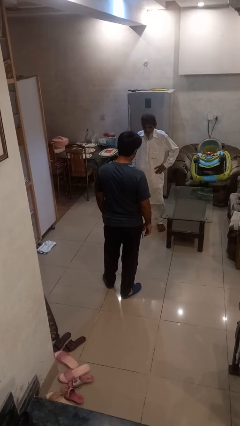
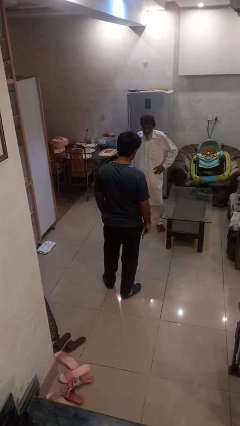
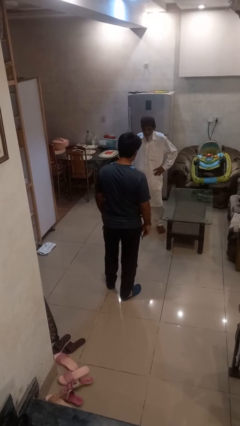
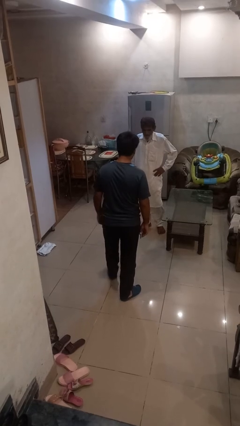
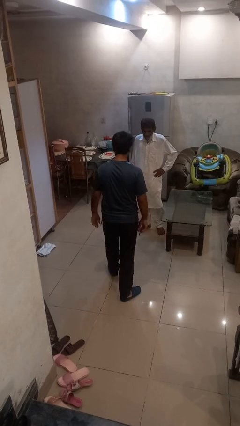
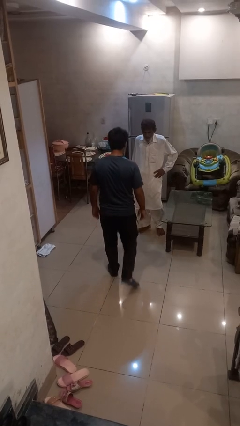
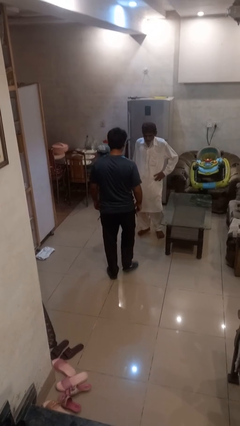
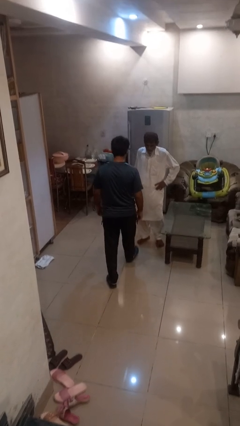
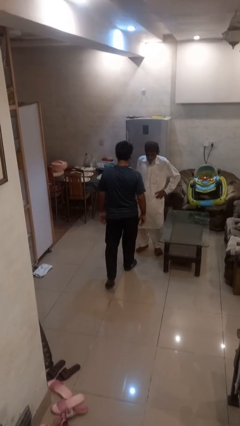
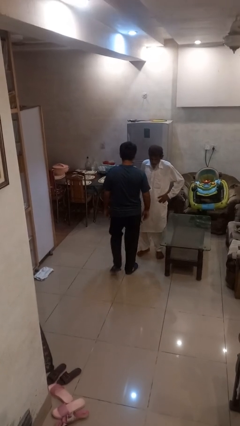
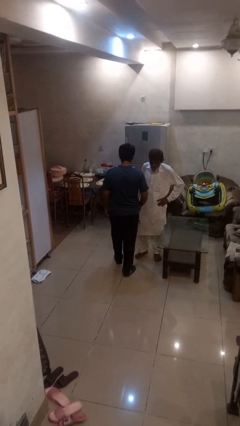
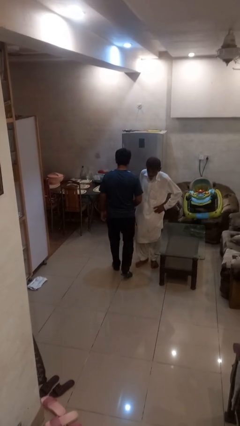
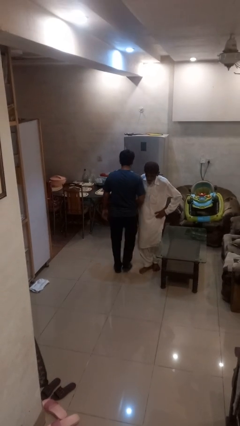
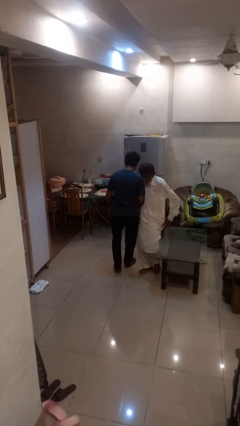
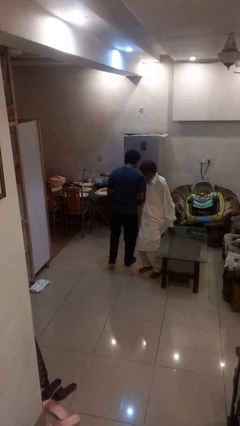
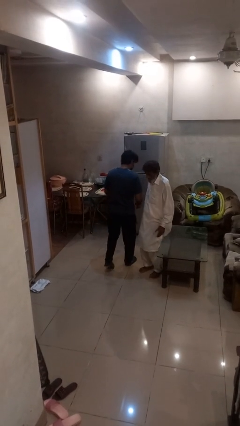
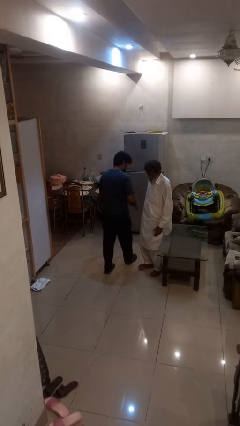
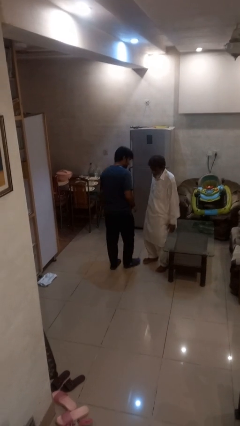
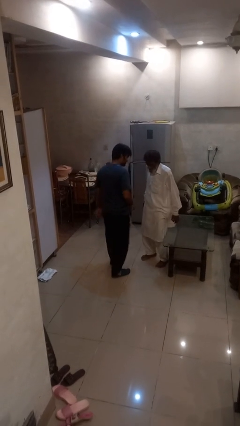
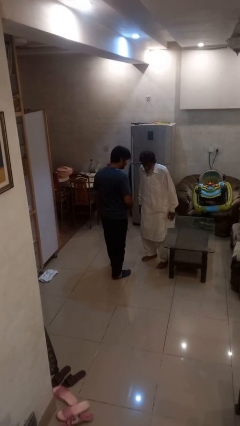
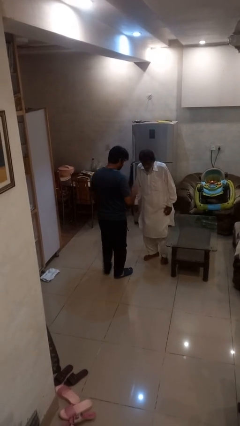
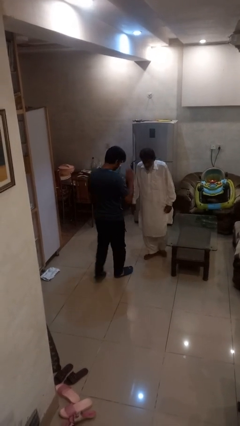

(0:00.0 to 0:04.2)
person bumps into person

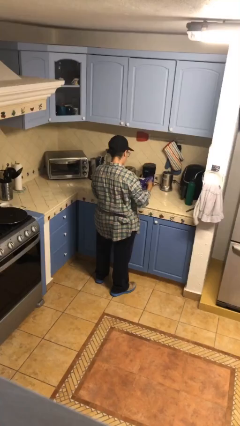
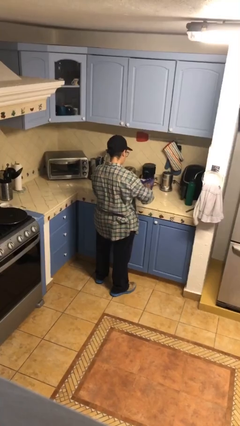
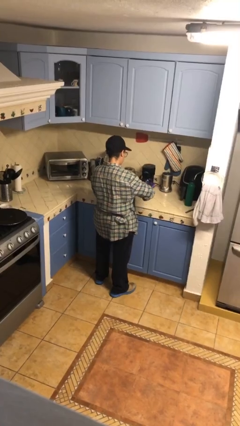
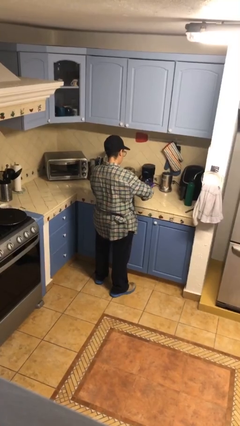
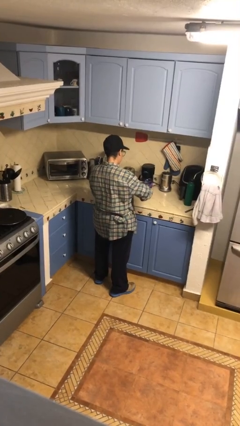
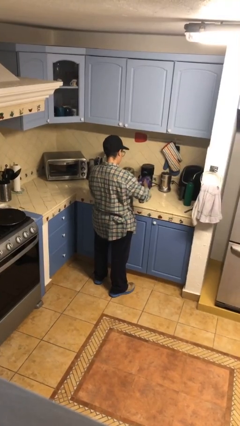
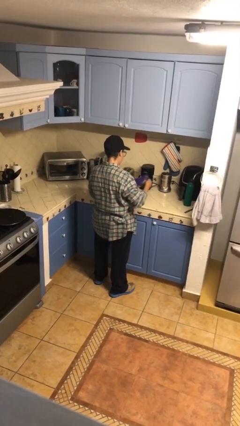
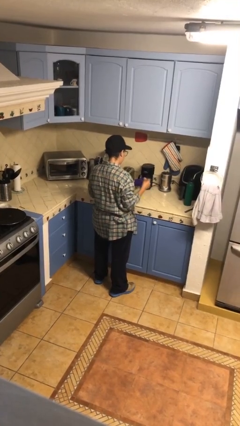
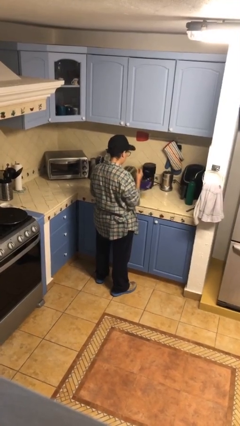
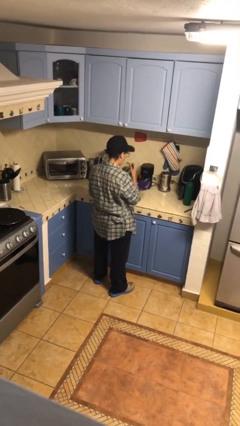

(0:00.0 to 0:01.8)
person eats snack from bag

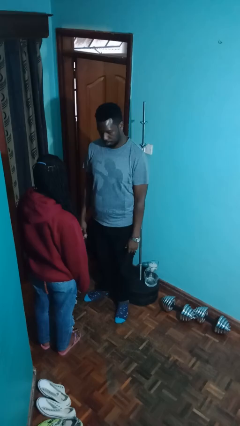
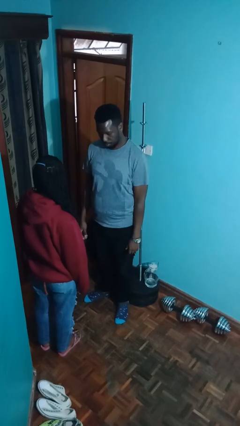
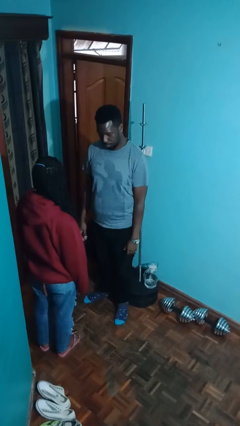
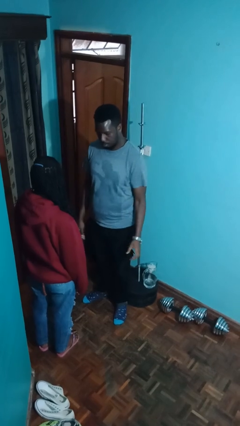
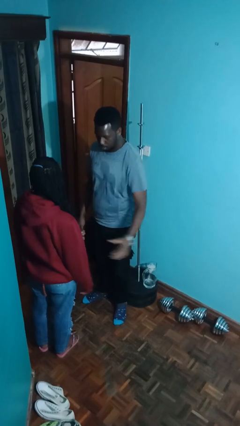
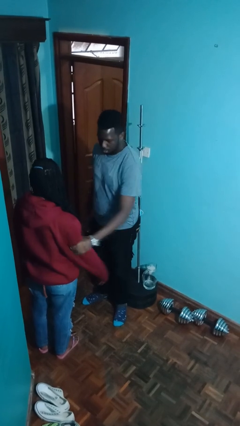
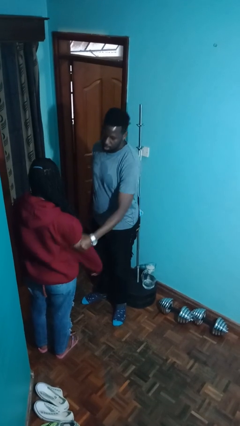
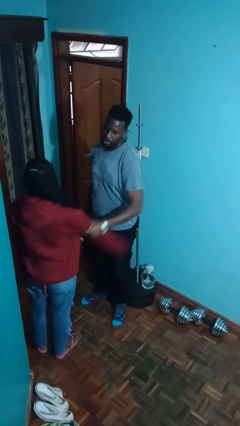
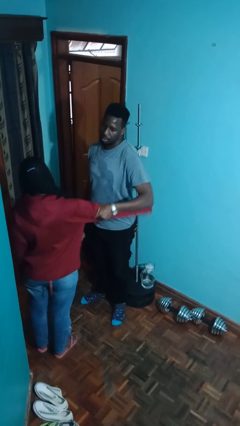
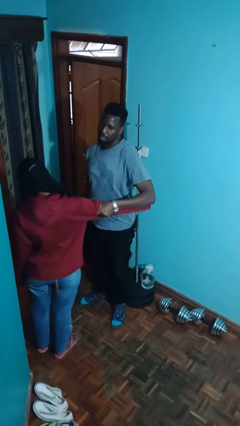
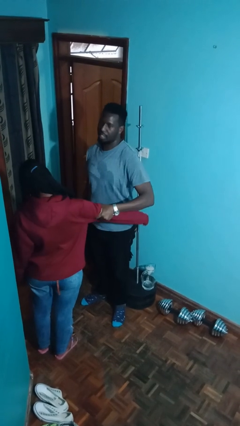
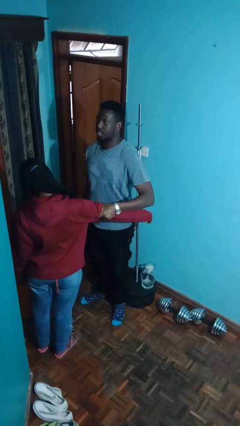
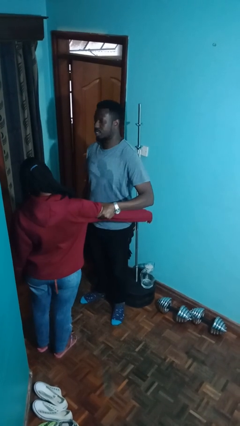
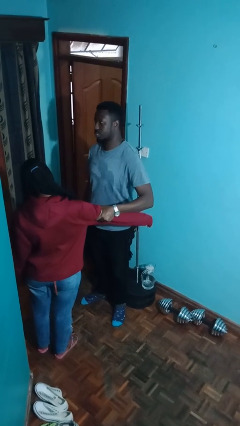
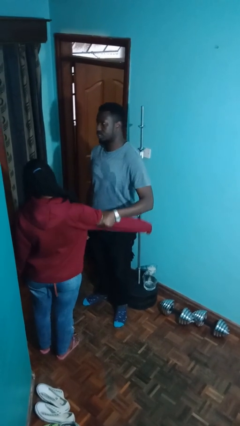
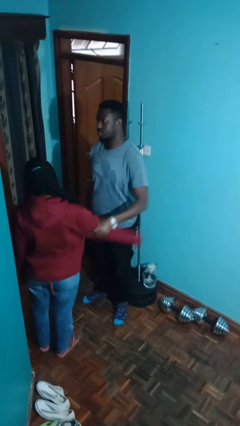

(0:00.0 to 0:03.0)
person grabs person by bicep

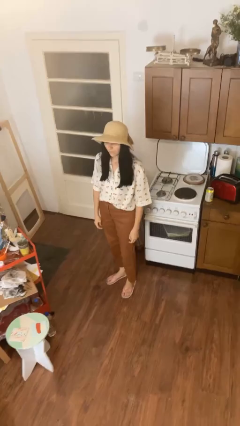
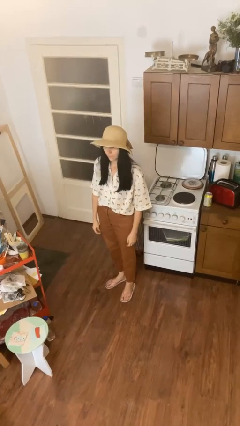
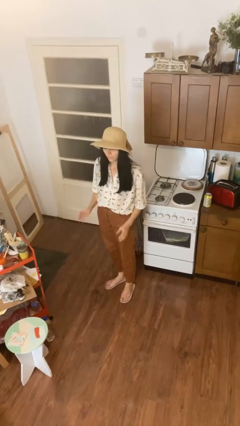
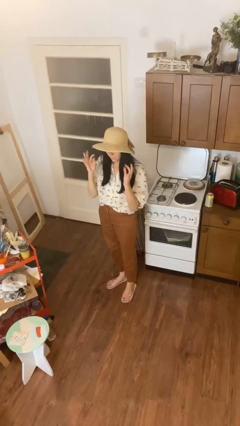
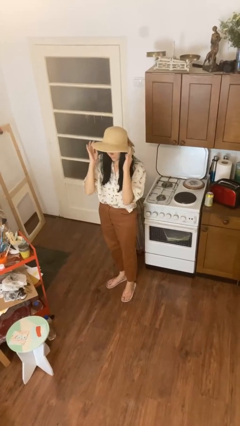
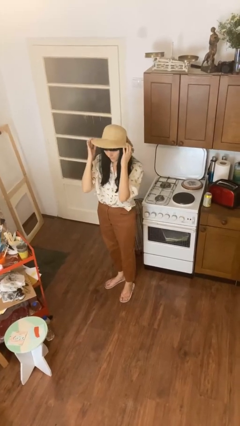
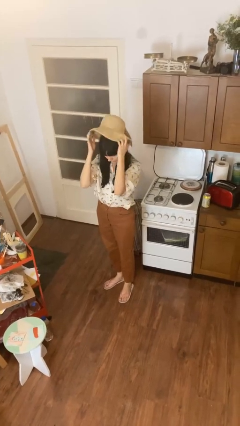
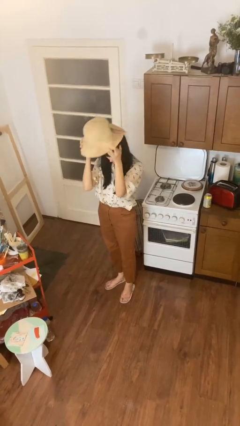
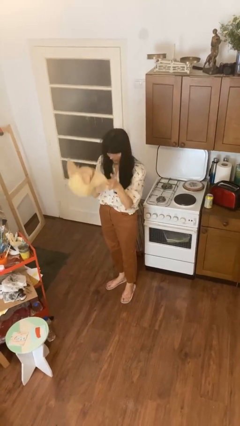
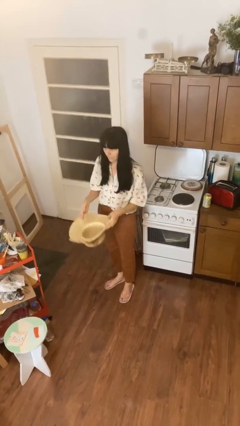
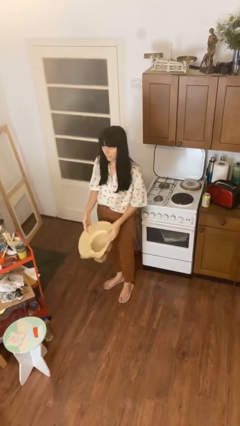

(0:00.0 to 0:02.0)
person takes off hat

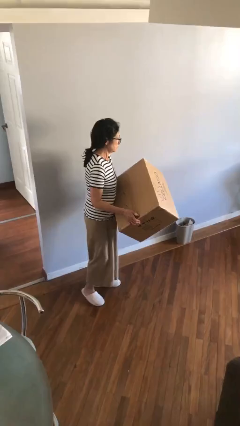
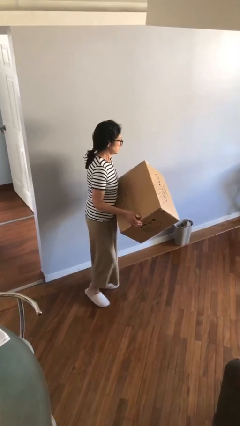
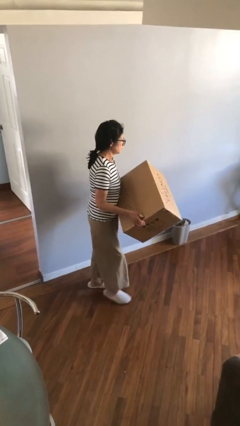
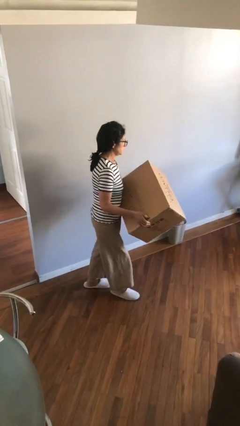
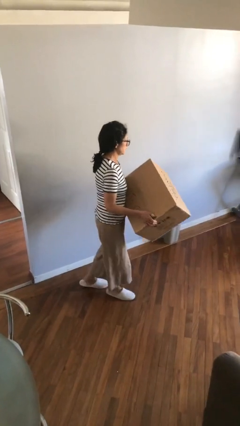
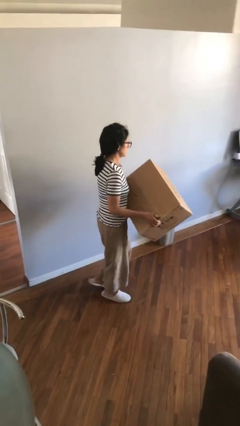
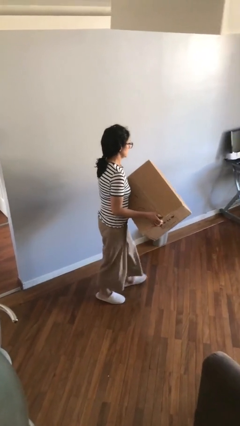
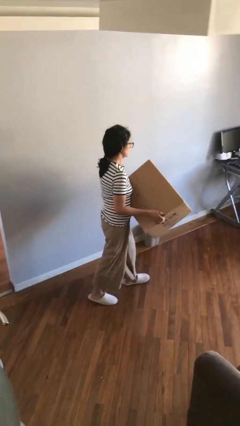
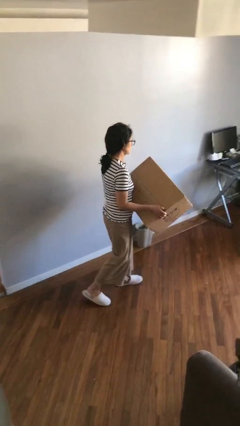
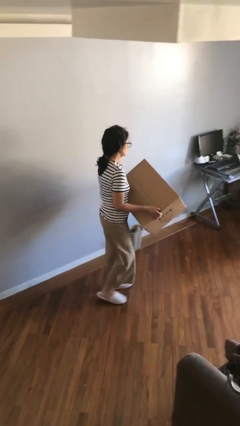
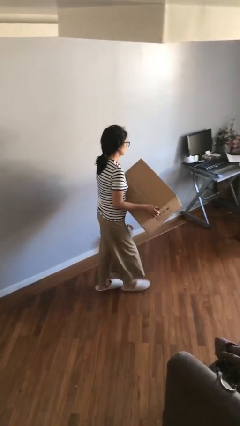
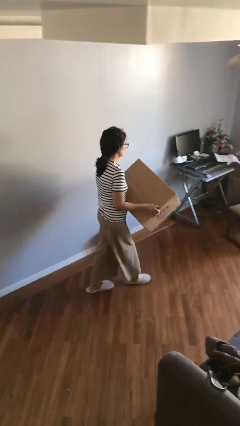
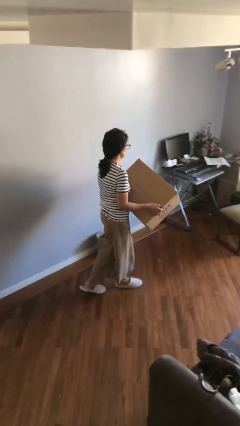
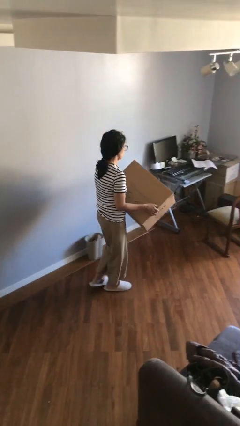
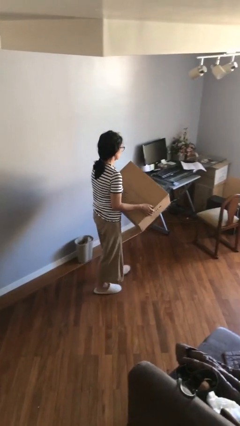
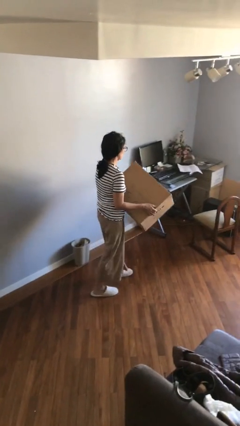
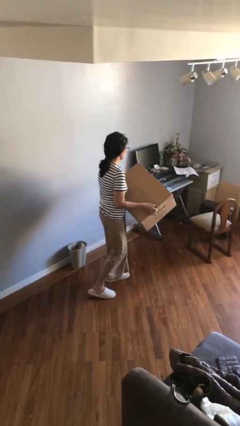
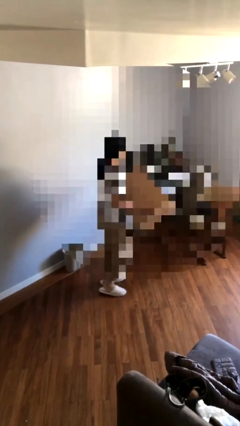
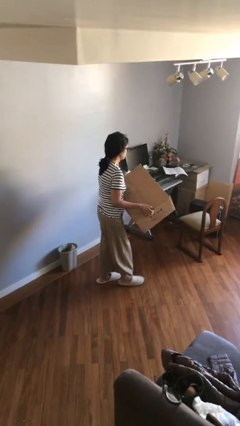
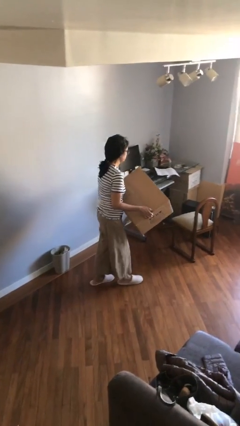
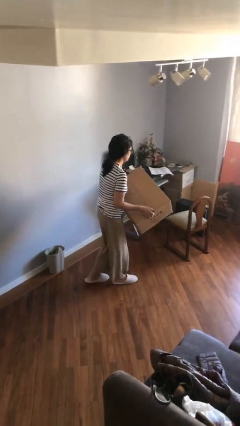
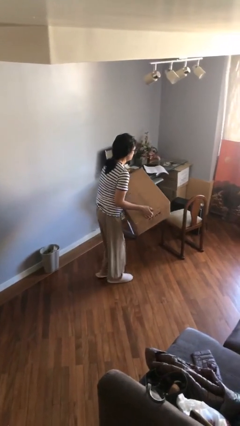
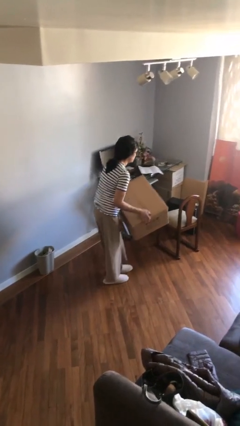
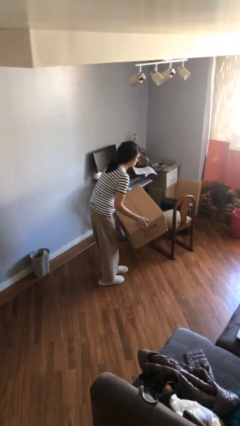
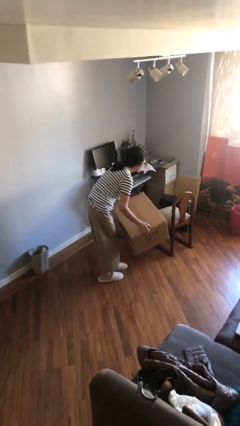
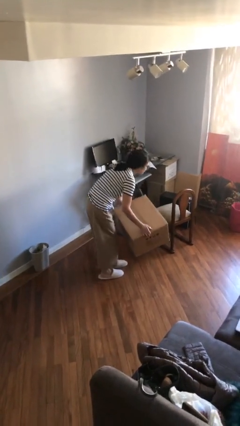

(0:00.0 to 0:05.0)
person carries heavy object

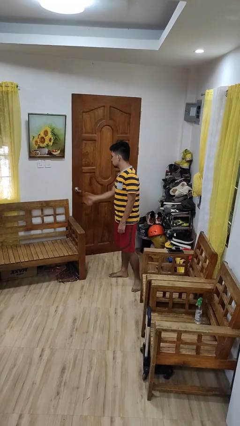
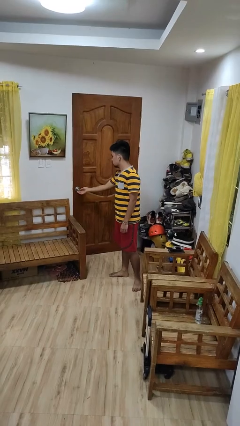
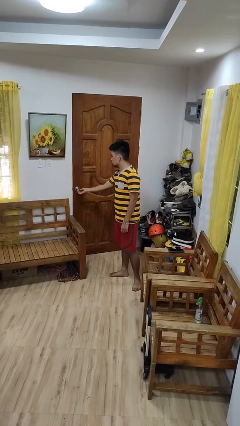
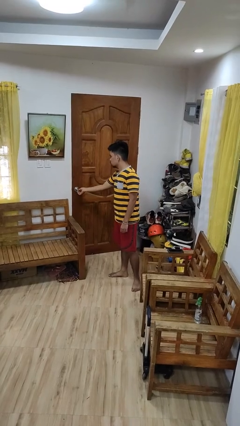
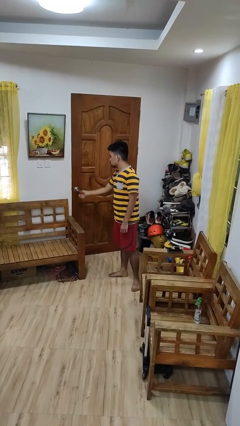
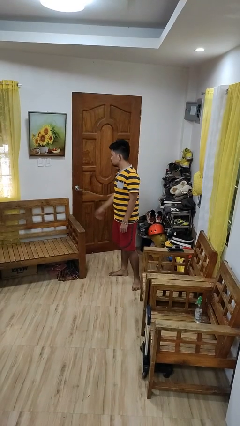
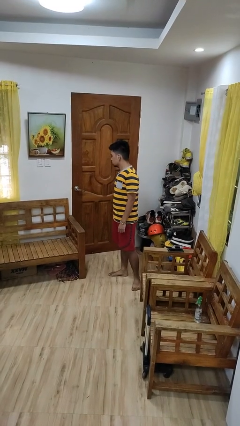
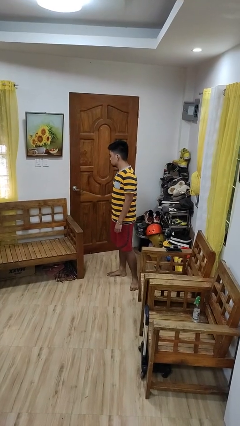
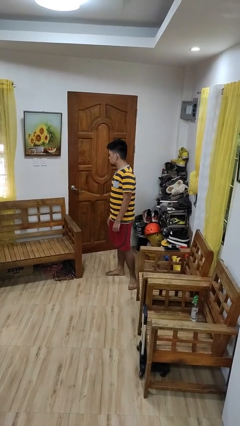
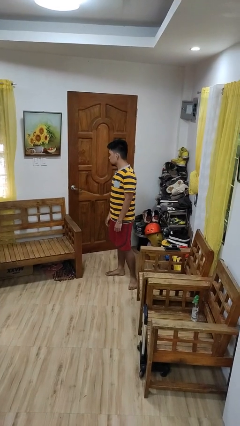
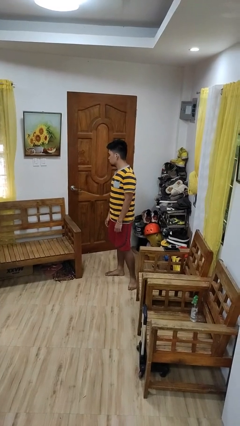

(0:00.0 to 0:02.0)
person locks door with keys
